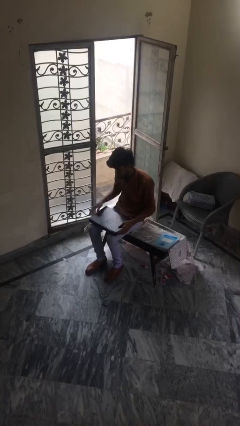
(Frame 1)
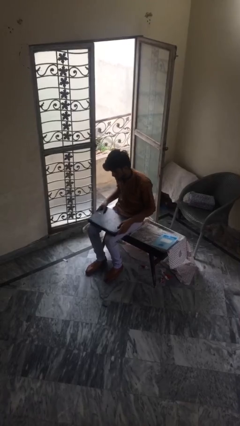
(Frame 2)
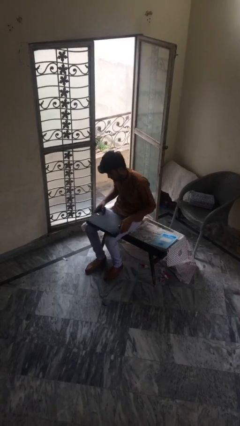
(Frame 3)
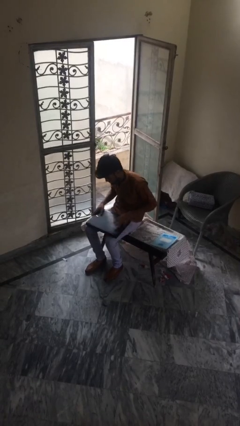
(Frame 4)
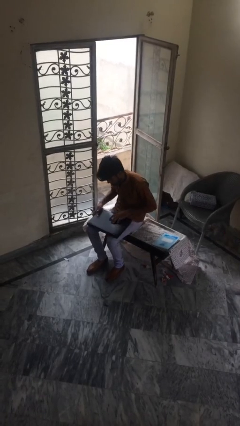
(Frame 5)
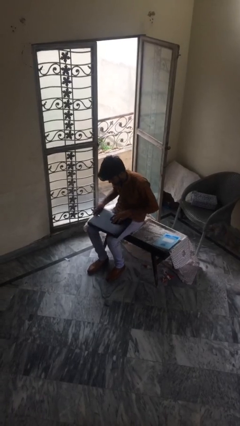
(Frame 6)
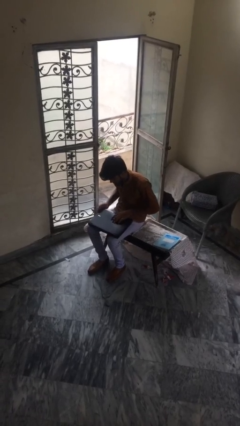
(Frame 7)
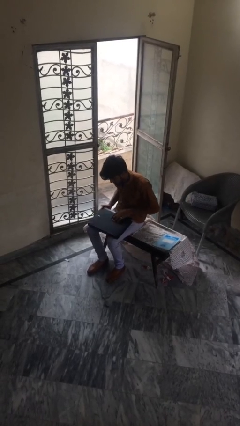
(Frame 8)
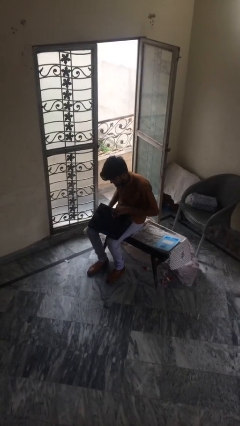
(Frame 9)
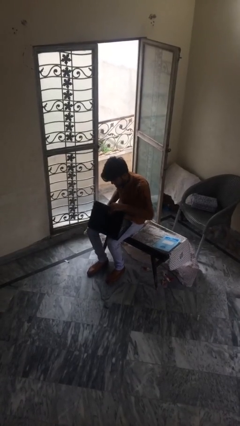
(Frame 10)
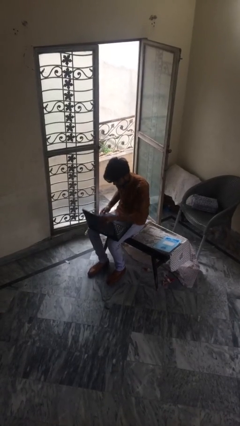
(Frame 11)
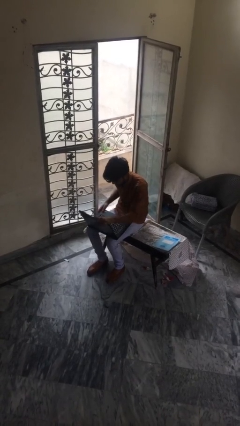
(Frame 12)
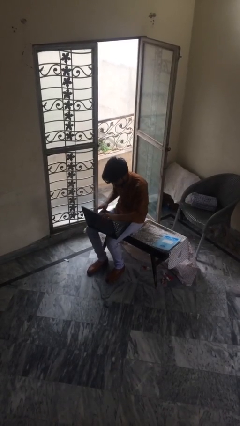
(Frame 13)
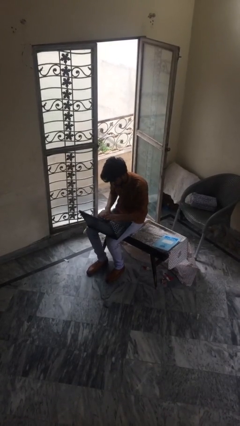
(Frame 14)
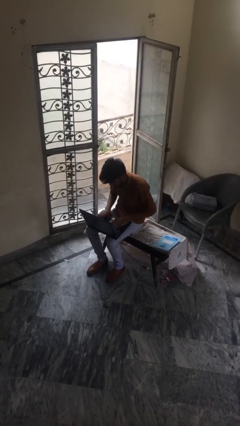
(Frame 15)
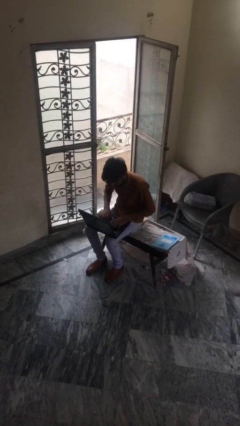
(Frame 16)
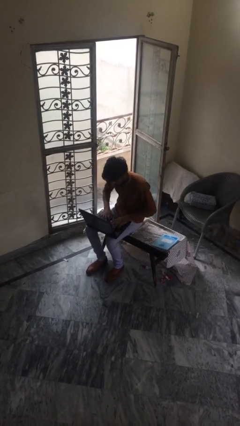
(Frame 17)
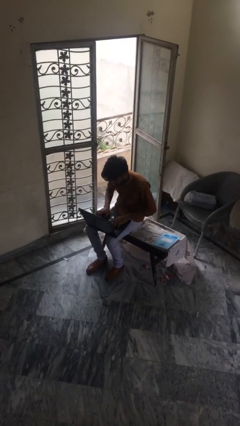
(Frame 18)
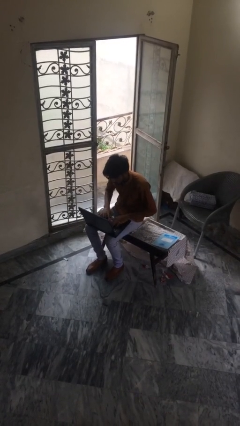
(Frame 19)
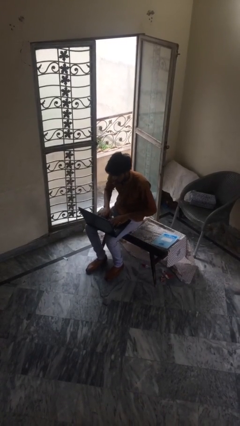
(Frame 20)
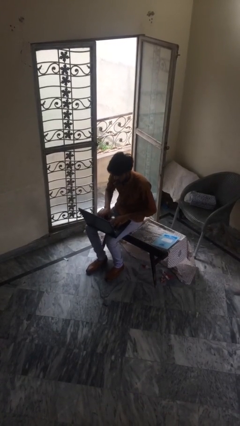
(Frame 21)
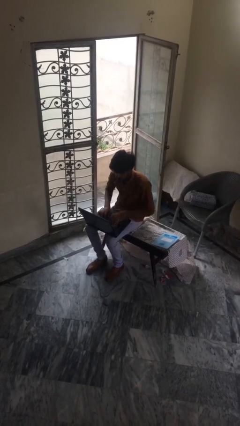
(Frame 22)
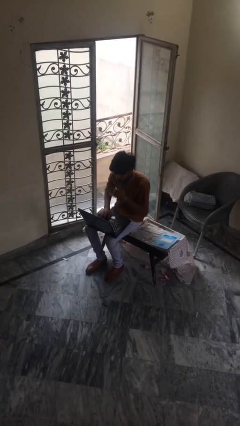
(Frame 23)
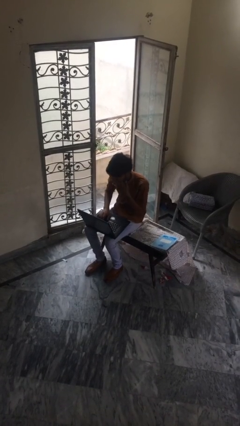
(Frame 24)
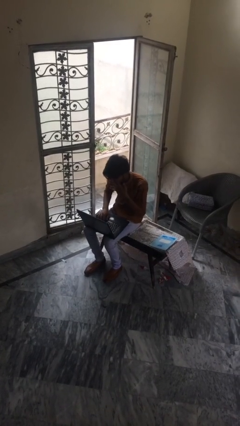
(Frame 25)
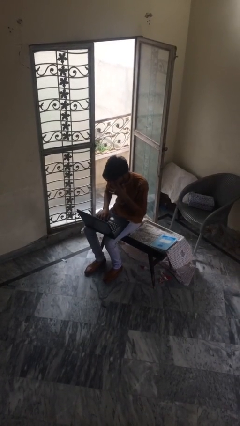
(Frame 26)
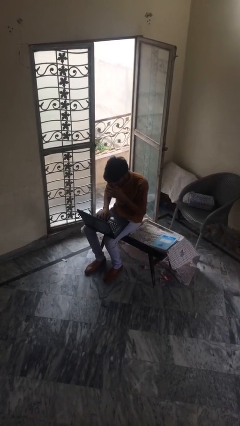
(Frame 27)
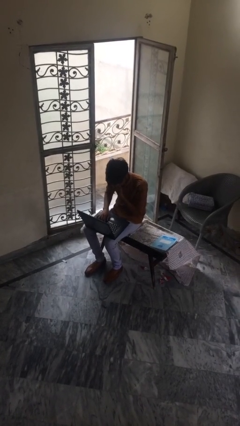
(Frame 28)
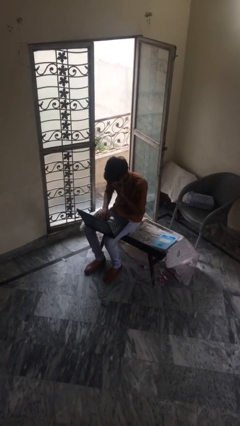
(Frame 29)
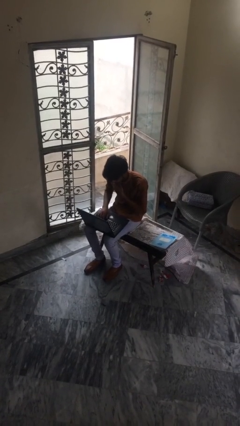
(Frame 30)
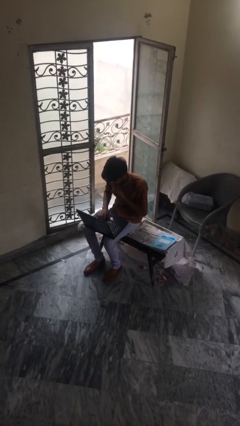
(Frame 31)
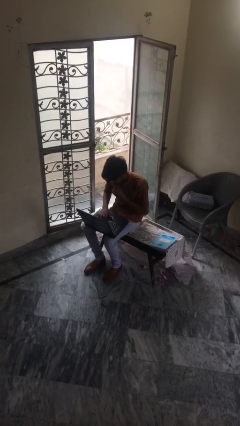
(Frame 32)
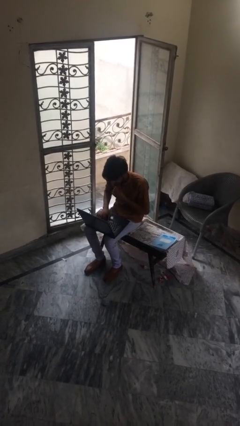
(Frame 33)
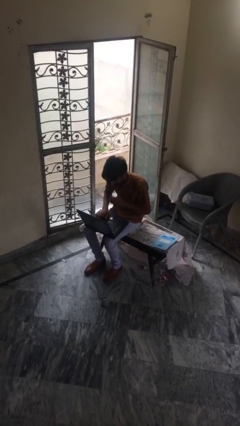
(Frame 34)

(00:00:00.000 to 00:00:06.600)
person interacts with laptop

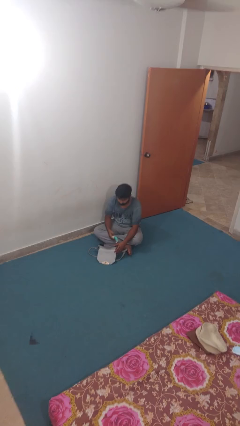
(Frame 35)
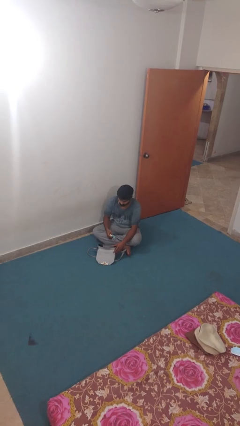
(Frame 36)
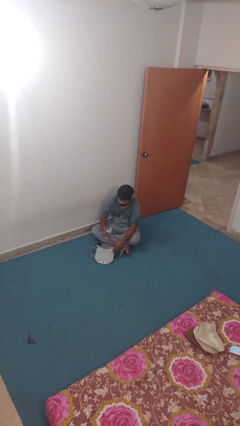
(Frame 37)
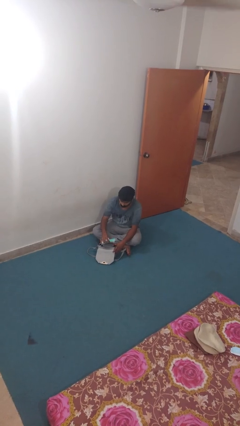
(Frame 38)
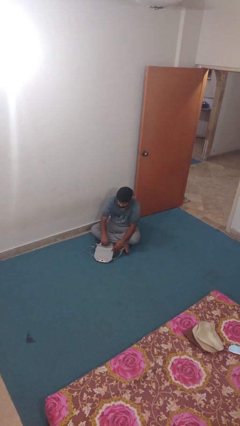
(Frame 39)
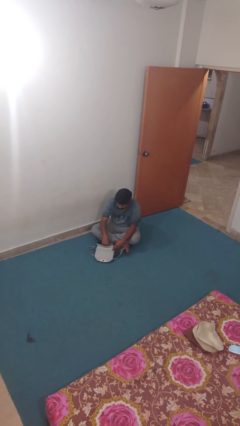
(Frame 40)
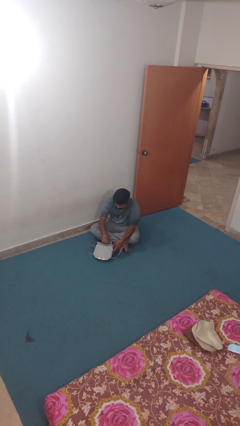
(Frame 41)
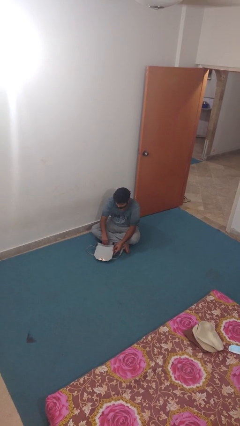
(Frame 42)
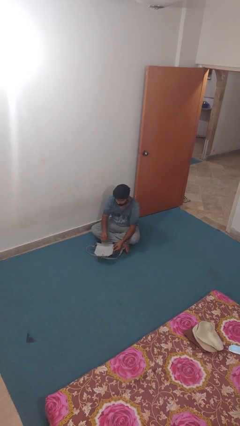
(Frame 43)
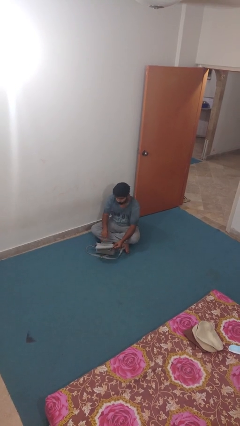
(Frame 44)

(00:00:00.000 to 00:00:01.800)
person puts object into purse

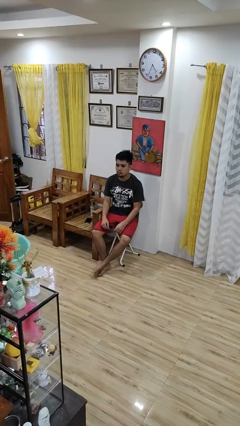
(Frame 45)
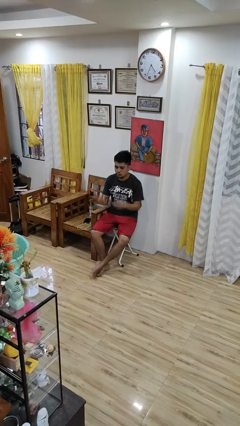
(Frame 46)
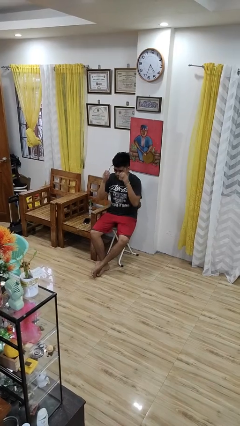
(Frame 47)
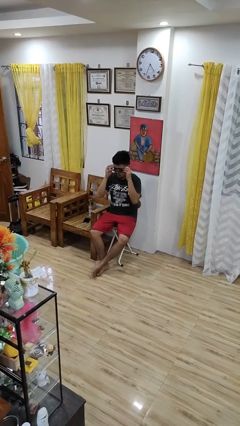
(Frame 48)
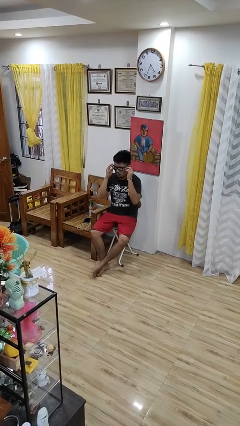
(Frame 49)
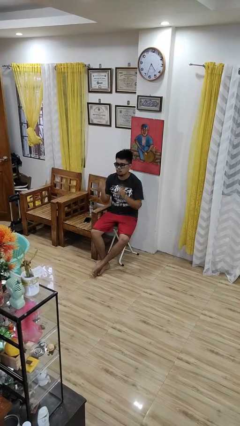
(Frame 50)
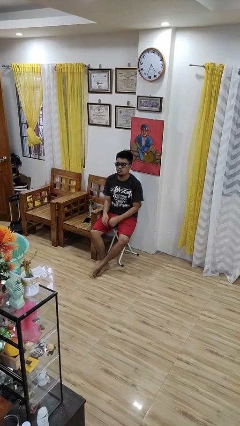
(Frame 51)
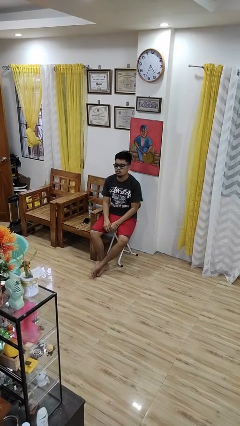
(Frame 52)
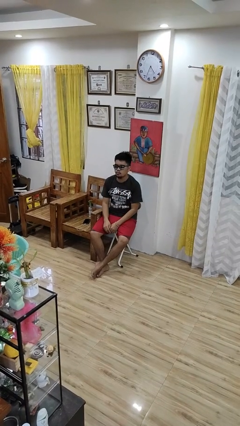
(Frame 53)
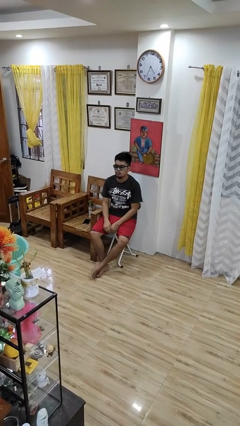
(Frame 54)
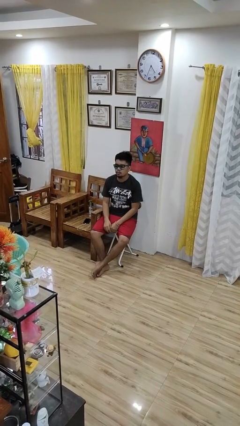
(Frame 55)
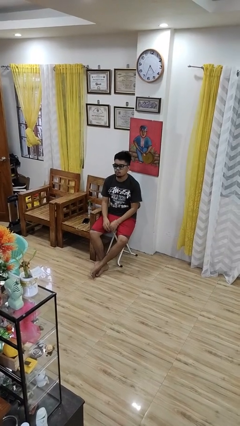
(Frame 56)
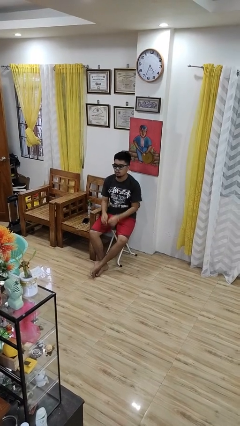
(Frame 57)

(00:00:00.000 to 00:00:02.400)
person puts on sunglasses

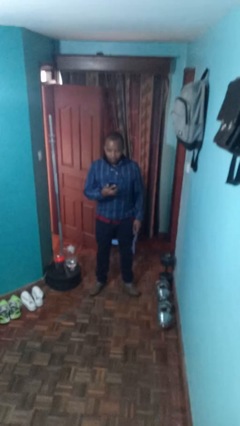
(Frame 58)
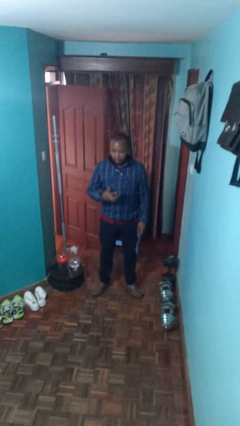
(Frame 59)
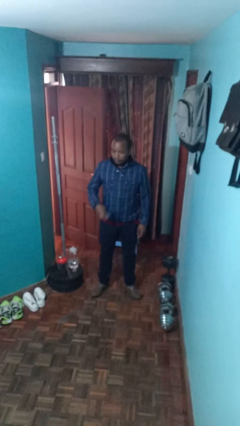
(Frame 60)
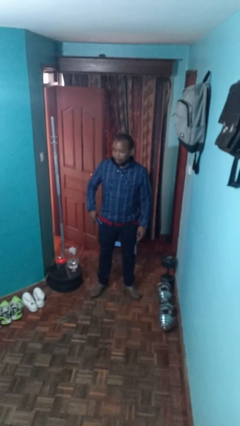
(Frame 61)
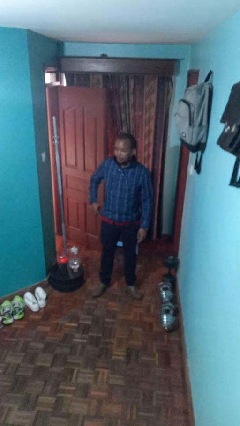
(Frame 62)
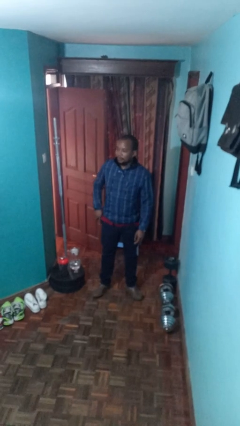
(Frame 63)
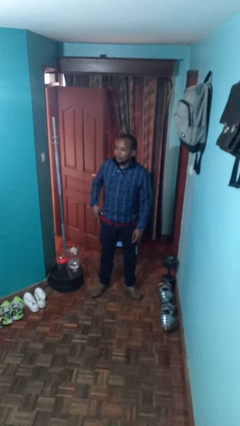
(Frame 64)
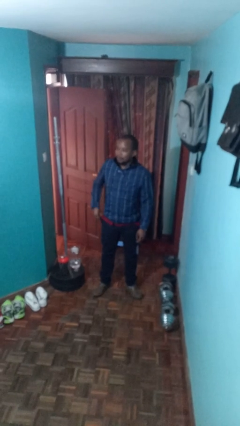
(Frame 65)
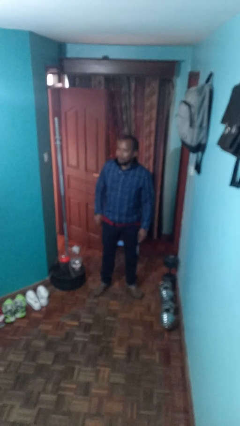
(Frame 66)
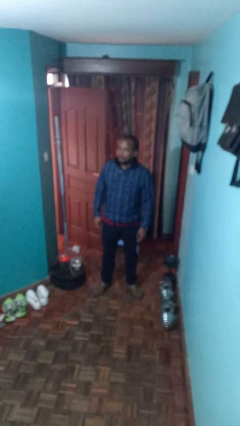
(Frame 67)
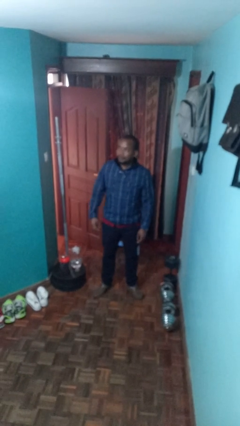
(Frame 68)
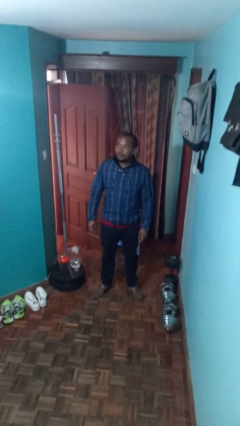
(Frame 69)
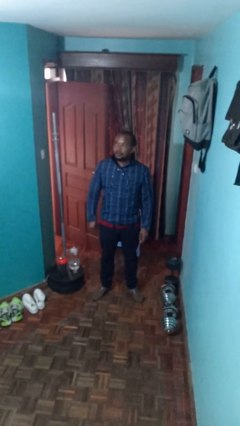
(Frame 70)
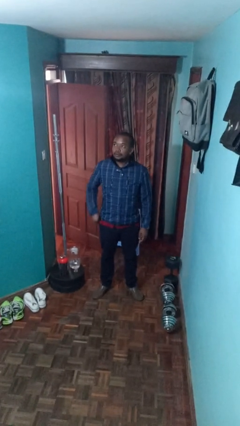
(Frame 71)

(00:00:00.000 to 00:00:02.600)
person puts phone into pocket

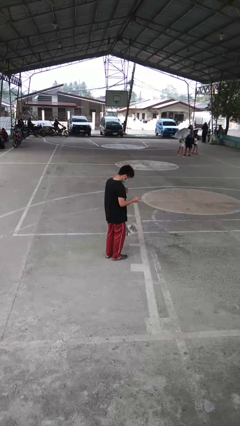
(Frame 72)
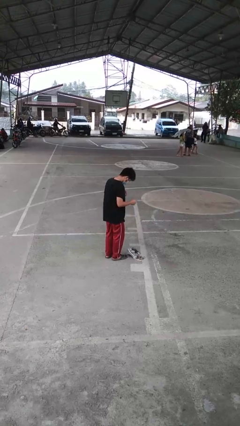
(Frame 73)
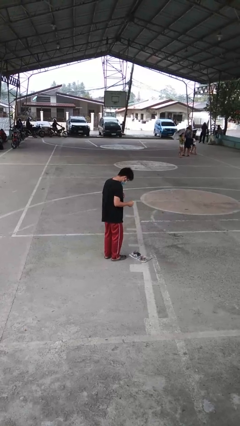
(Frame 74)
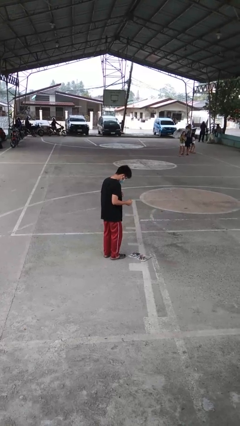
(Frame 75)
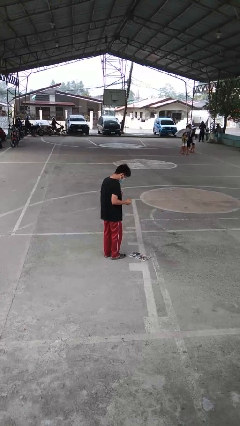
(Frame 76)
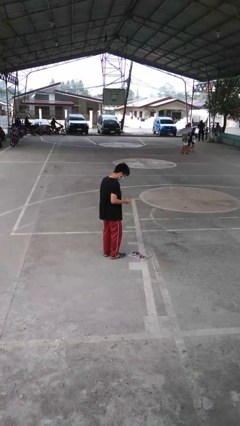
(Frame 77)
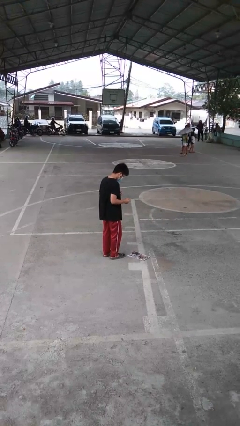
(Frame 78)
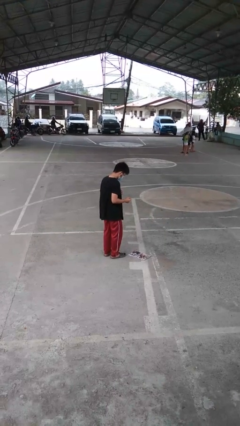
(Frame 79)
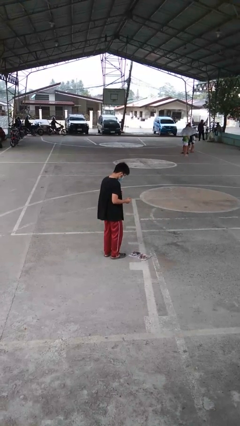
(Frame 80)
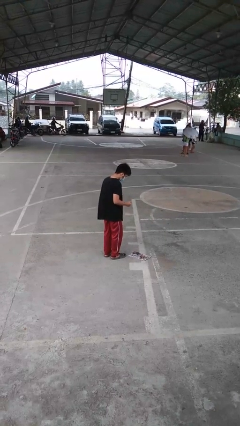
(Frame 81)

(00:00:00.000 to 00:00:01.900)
person drops object

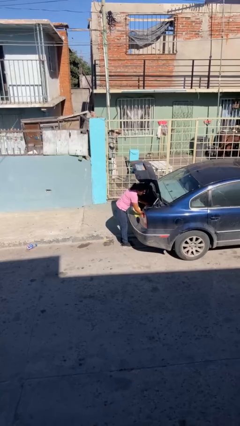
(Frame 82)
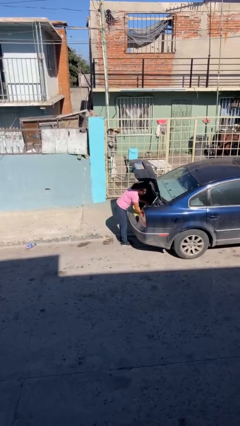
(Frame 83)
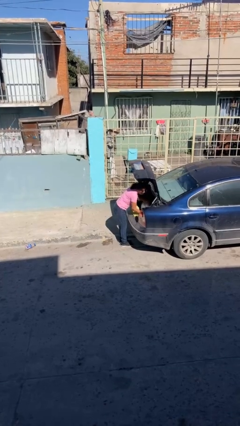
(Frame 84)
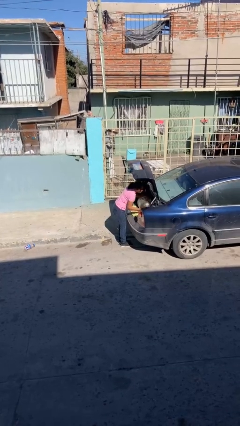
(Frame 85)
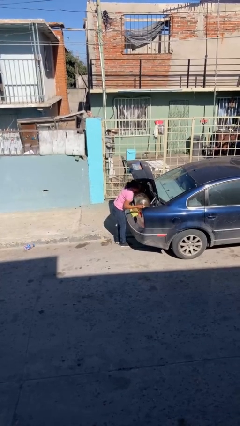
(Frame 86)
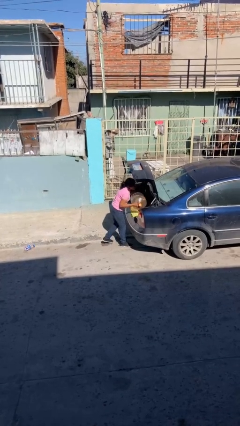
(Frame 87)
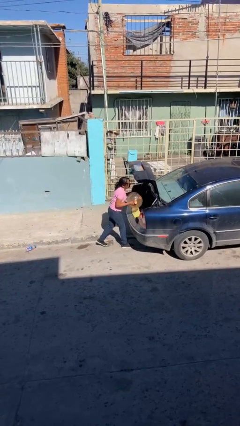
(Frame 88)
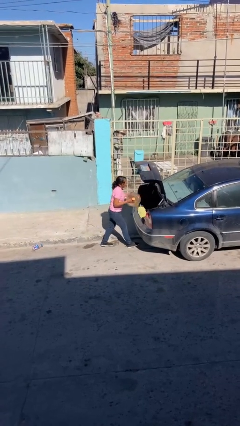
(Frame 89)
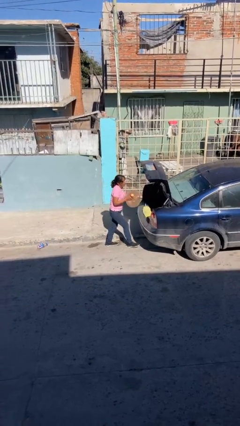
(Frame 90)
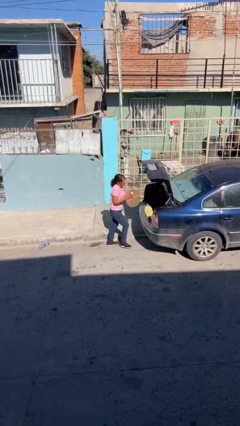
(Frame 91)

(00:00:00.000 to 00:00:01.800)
person unloads car
